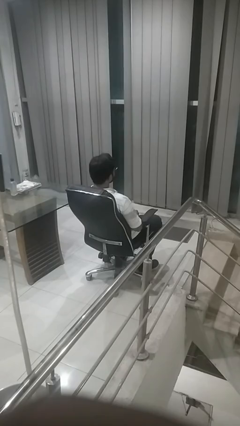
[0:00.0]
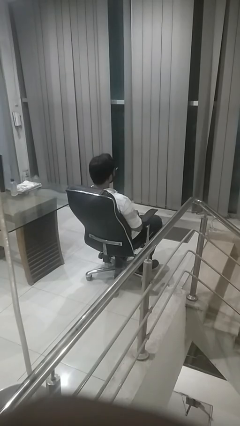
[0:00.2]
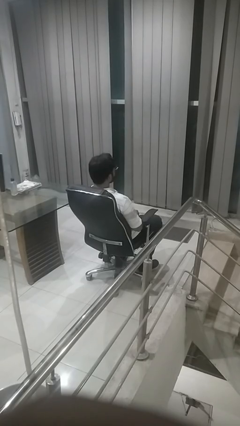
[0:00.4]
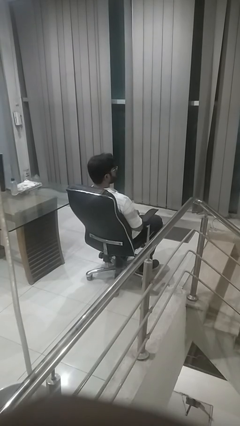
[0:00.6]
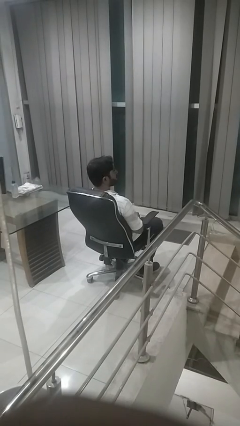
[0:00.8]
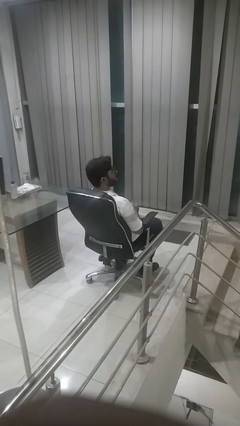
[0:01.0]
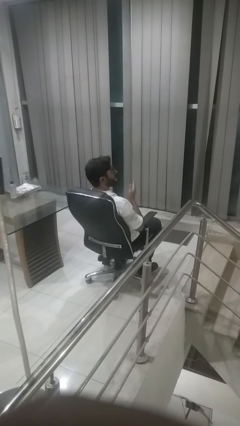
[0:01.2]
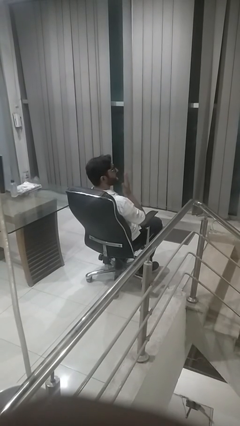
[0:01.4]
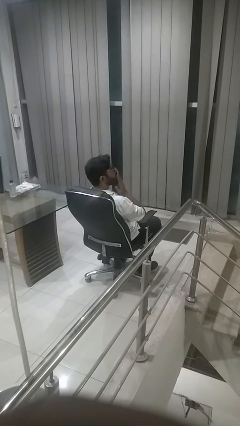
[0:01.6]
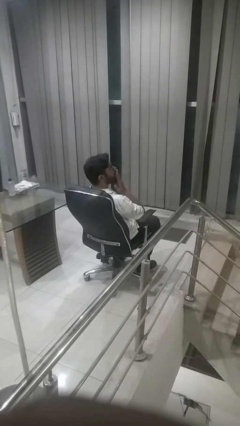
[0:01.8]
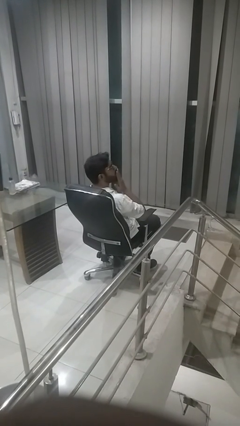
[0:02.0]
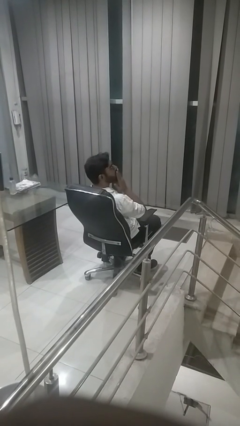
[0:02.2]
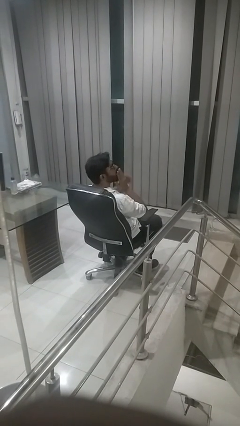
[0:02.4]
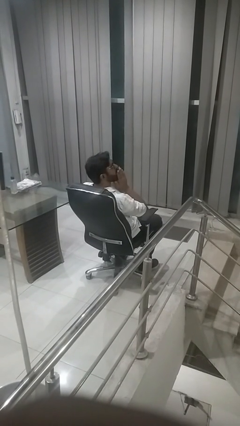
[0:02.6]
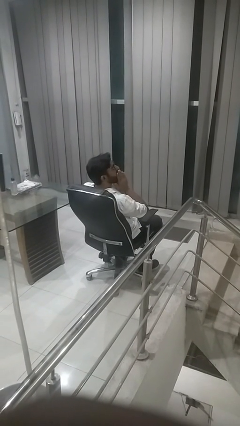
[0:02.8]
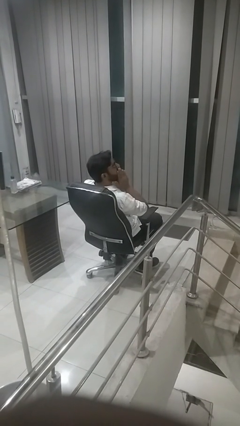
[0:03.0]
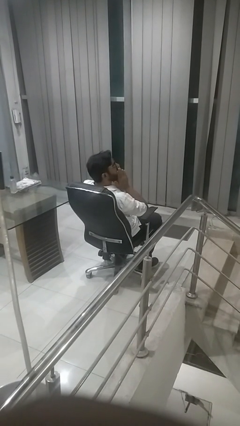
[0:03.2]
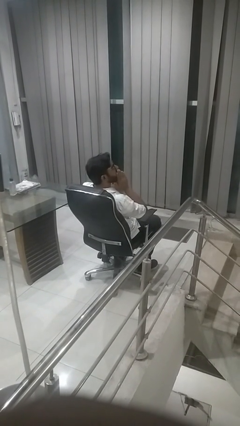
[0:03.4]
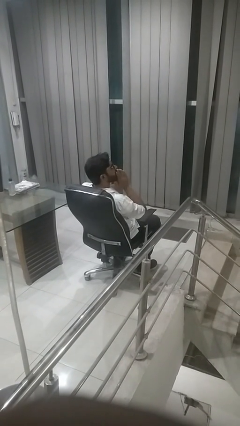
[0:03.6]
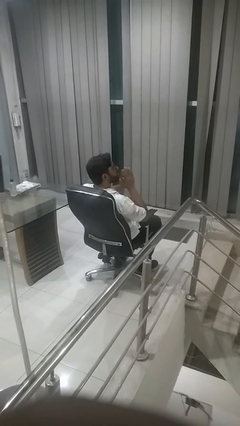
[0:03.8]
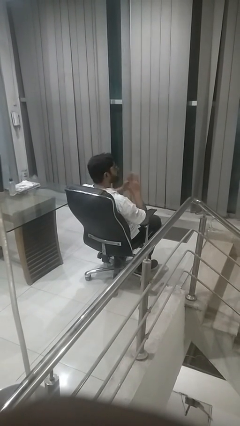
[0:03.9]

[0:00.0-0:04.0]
person yawns

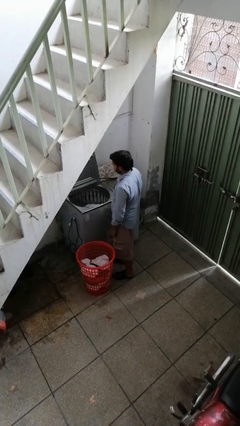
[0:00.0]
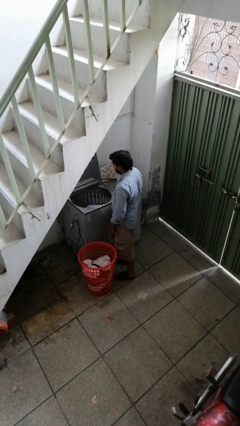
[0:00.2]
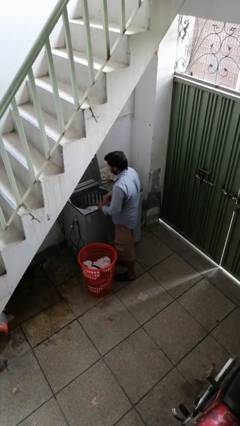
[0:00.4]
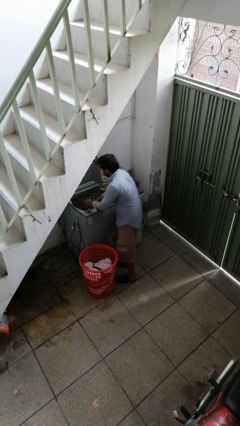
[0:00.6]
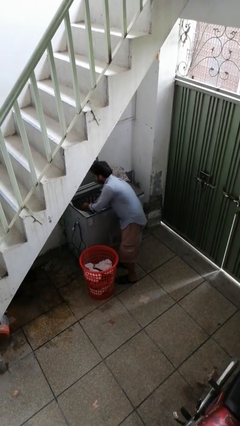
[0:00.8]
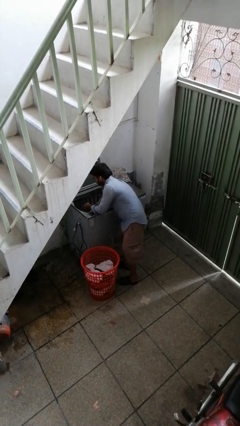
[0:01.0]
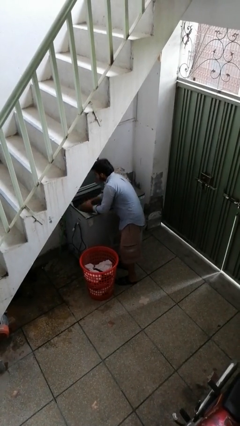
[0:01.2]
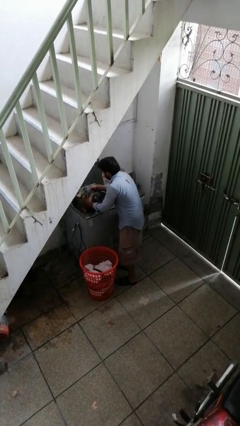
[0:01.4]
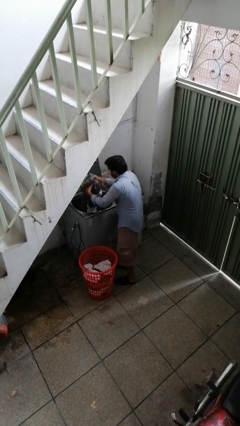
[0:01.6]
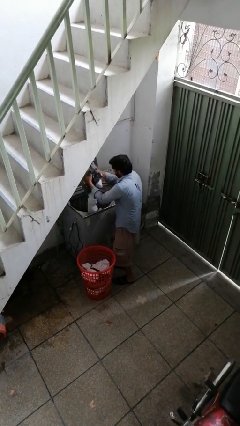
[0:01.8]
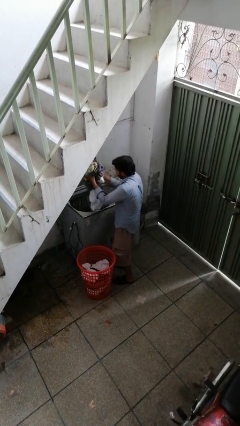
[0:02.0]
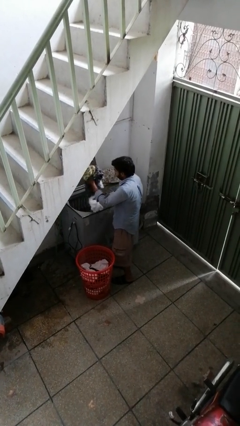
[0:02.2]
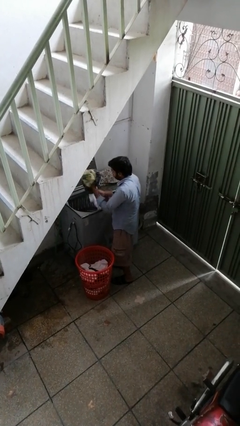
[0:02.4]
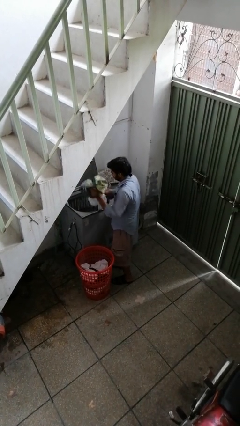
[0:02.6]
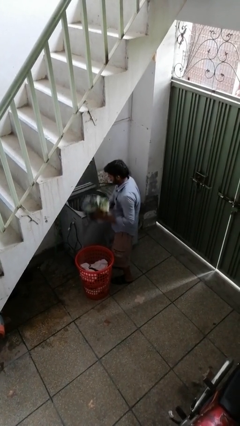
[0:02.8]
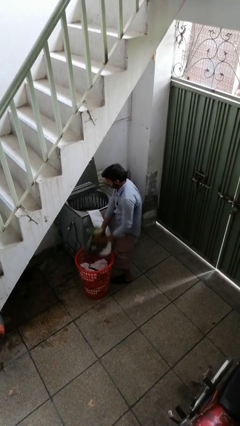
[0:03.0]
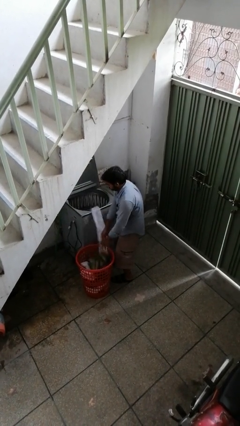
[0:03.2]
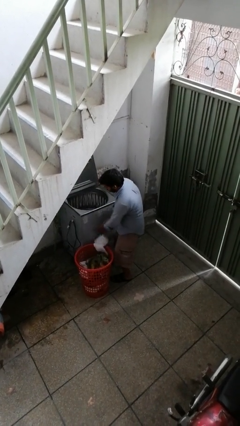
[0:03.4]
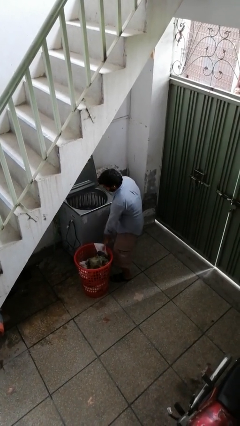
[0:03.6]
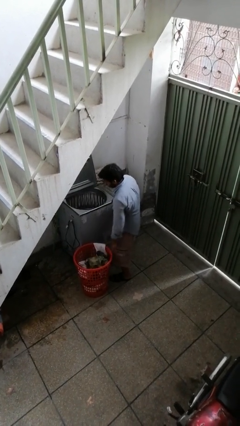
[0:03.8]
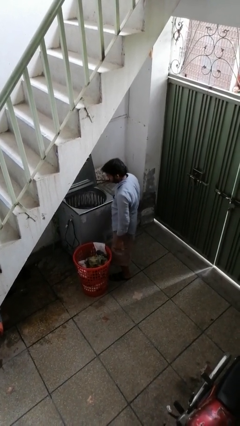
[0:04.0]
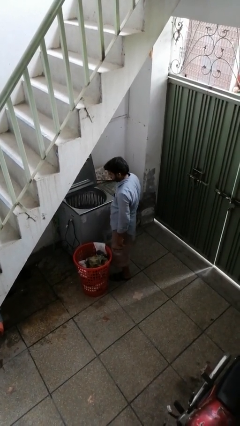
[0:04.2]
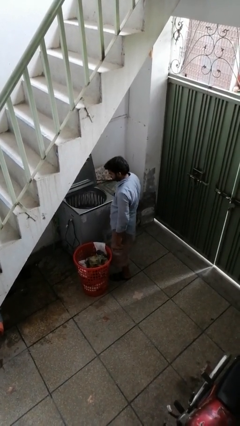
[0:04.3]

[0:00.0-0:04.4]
person unloads clotheswasher

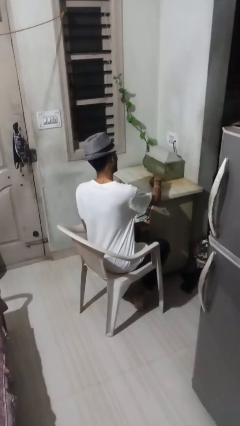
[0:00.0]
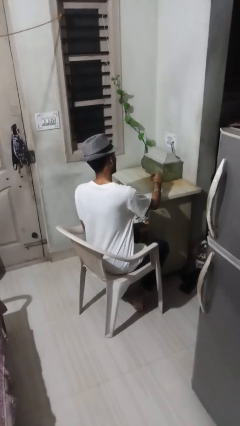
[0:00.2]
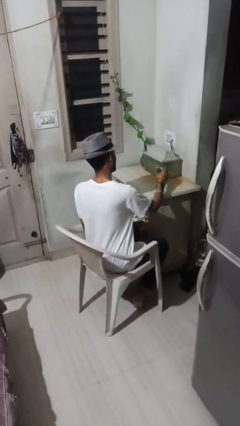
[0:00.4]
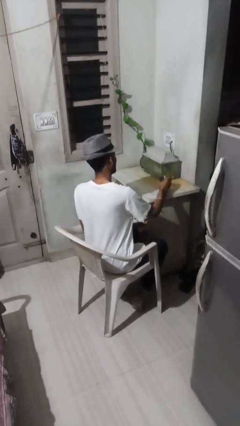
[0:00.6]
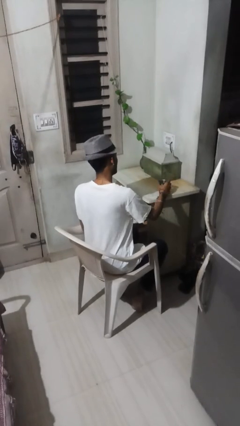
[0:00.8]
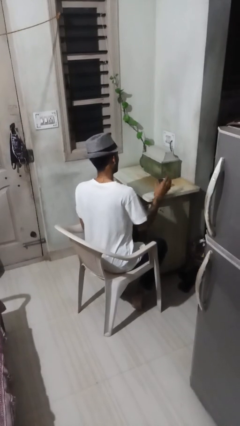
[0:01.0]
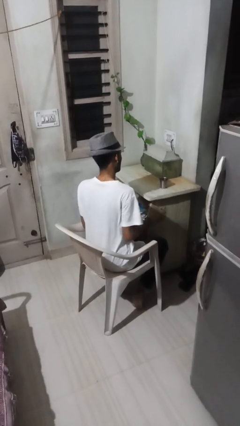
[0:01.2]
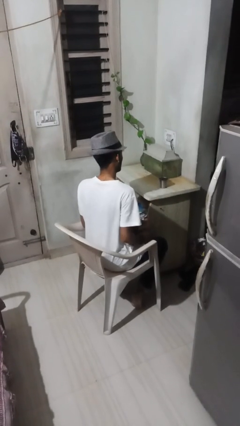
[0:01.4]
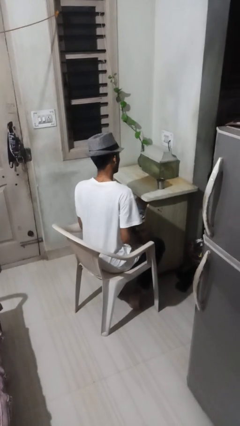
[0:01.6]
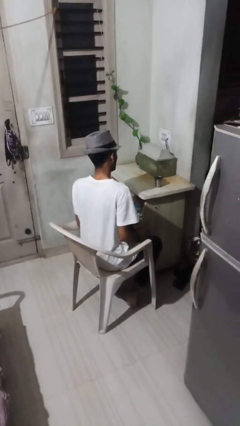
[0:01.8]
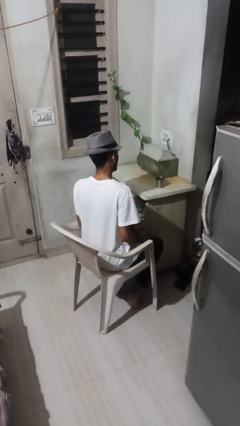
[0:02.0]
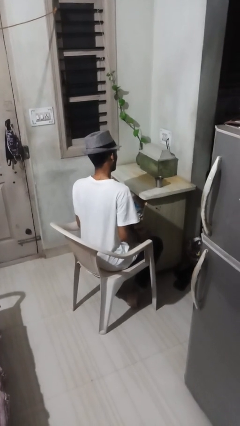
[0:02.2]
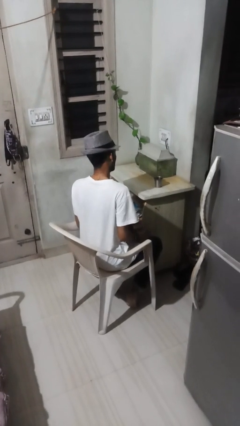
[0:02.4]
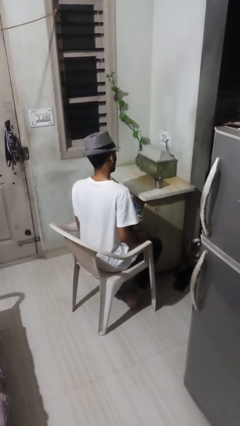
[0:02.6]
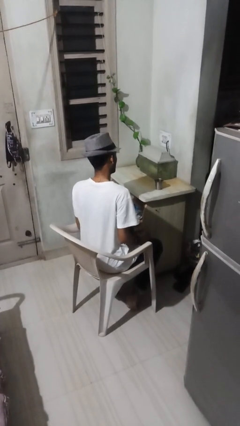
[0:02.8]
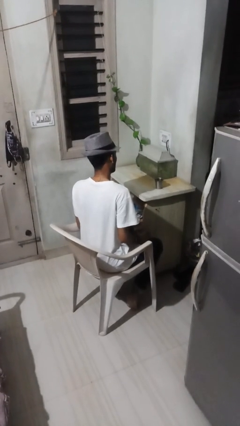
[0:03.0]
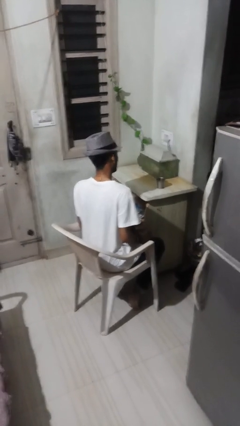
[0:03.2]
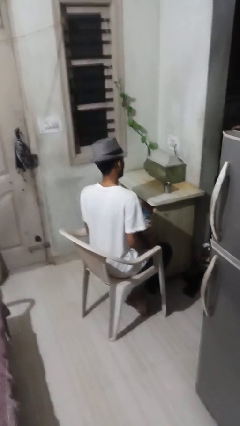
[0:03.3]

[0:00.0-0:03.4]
person sets upright glass

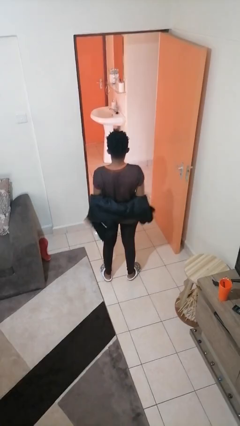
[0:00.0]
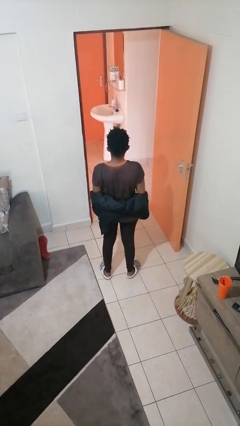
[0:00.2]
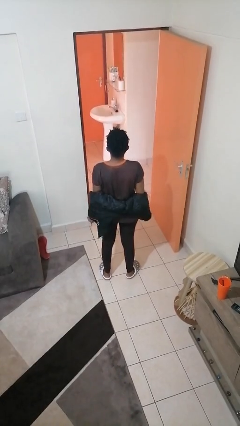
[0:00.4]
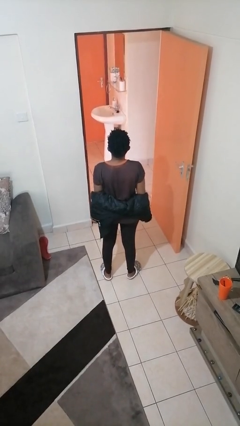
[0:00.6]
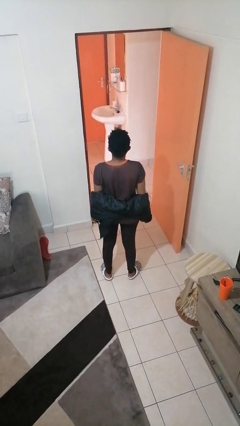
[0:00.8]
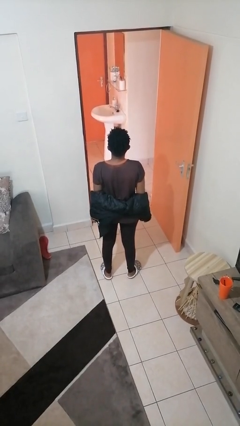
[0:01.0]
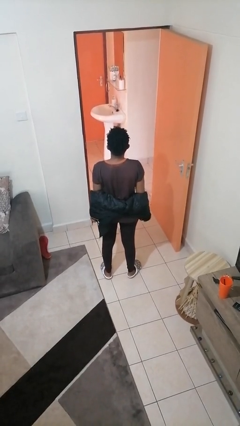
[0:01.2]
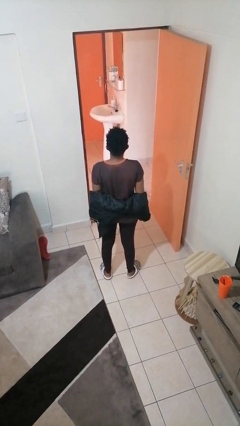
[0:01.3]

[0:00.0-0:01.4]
person takes off jacket

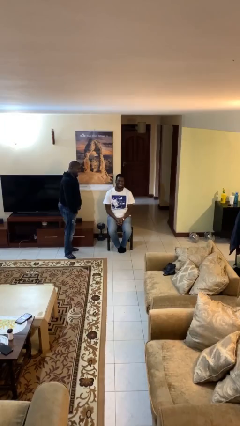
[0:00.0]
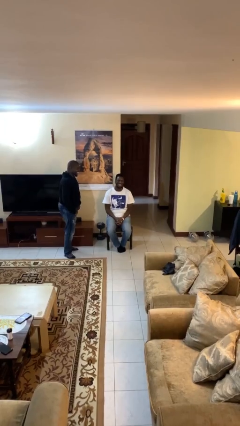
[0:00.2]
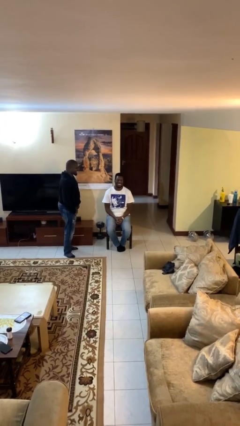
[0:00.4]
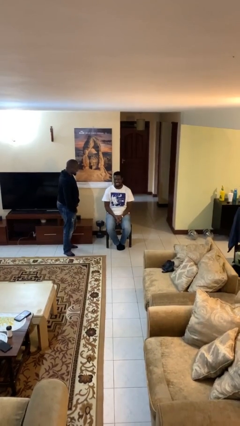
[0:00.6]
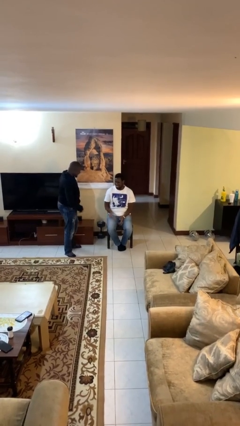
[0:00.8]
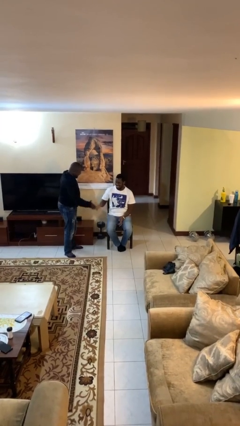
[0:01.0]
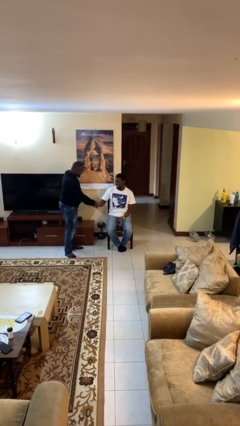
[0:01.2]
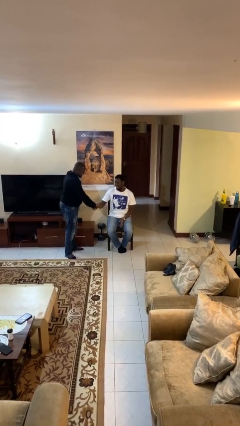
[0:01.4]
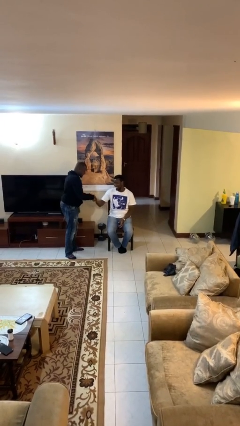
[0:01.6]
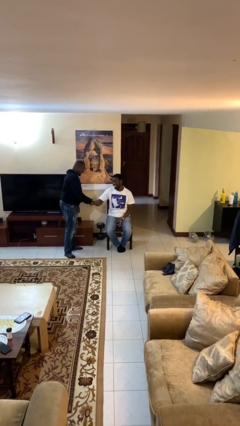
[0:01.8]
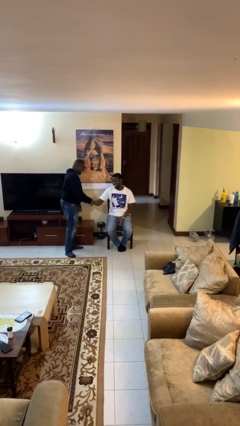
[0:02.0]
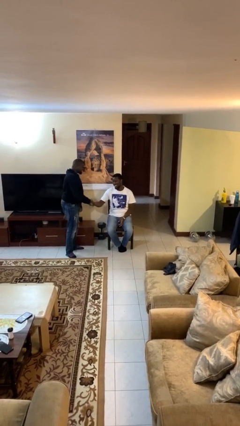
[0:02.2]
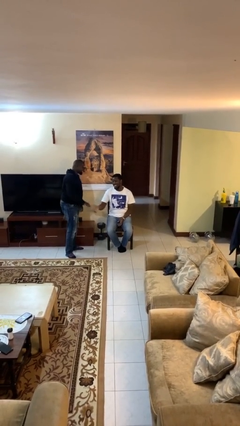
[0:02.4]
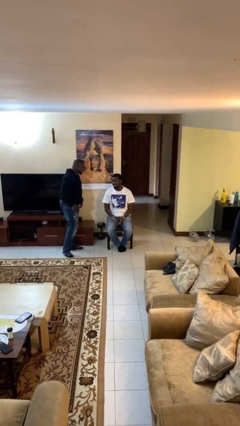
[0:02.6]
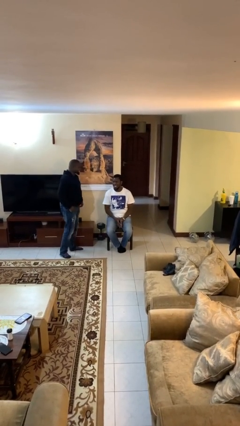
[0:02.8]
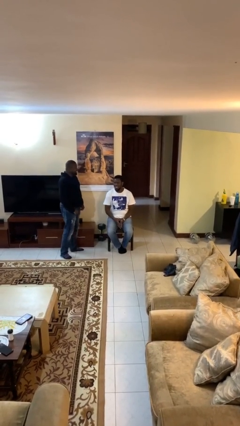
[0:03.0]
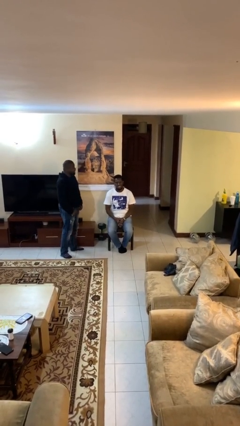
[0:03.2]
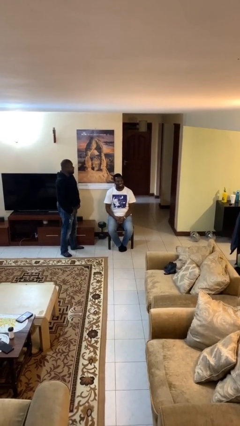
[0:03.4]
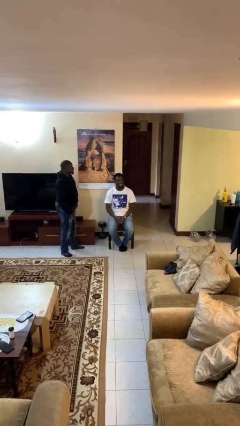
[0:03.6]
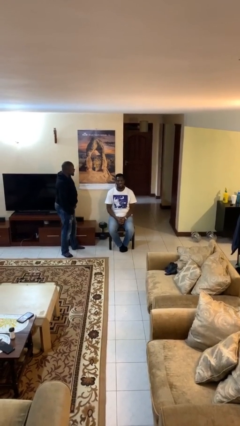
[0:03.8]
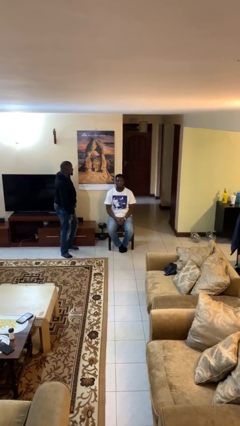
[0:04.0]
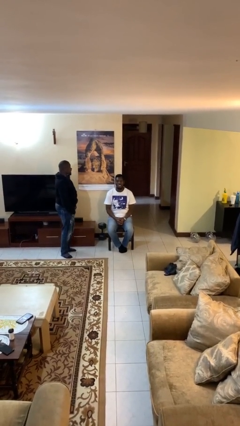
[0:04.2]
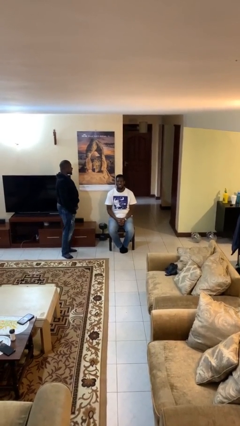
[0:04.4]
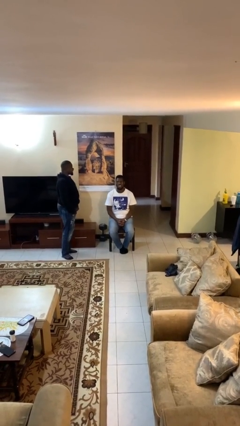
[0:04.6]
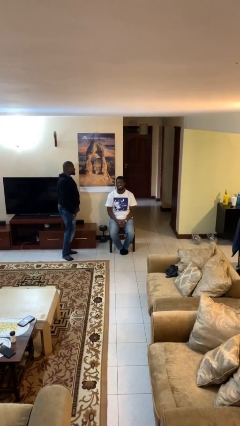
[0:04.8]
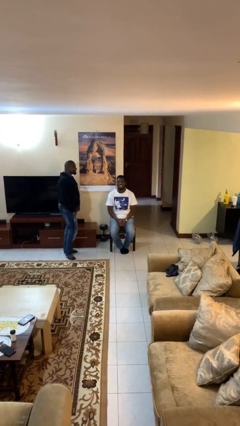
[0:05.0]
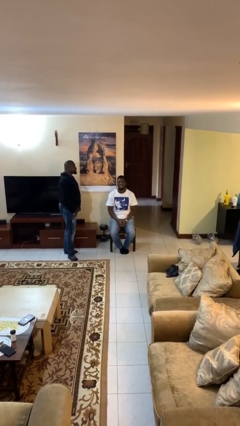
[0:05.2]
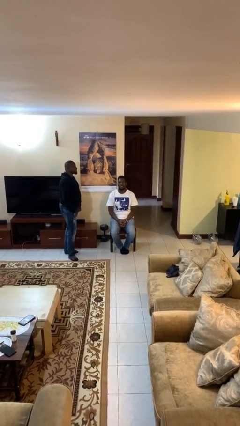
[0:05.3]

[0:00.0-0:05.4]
person shakes hand
